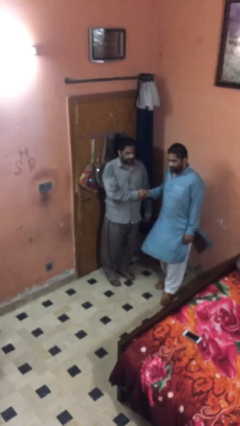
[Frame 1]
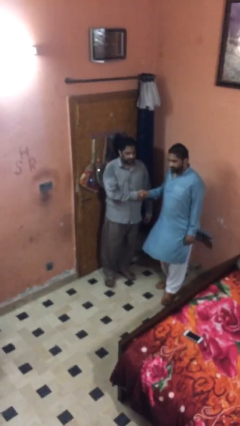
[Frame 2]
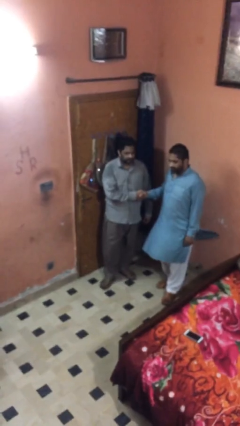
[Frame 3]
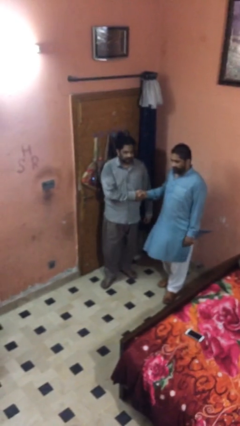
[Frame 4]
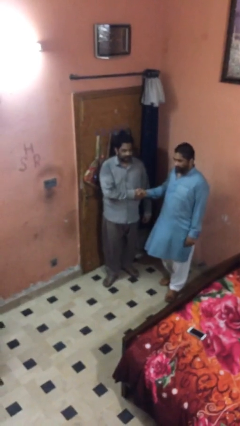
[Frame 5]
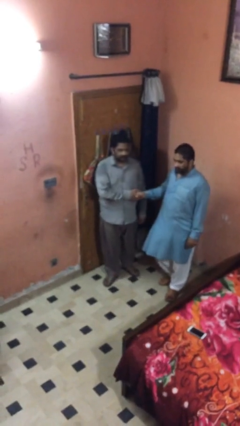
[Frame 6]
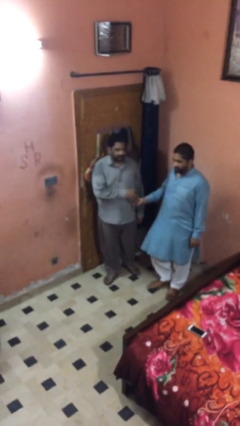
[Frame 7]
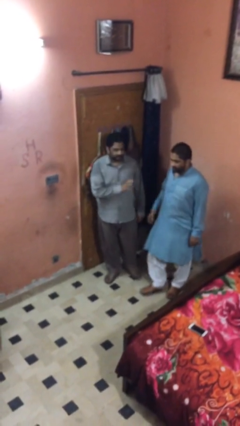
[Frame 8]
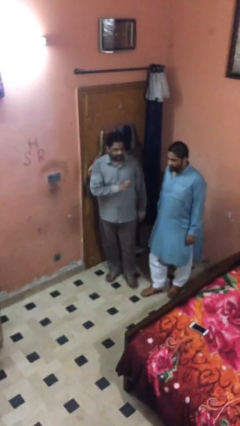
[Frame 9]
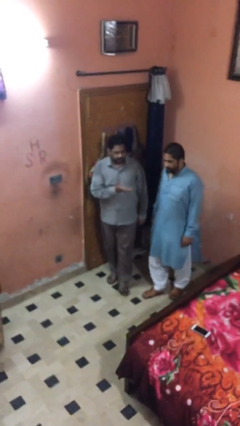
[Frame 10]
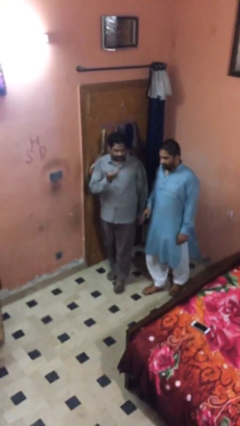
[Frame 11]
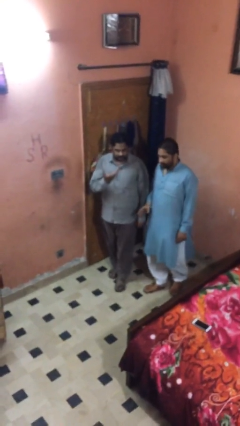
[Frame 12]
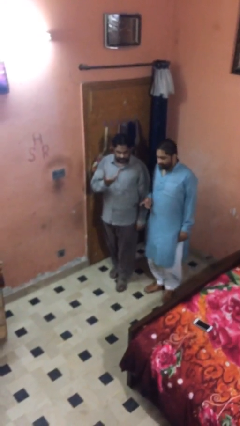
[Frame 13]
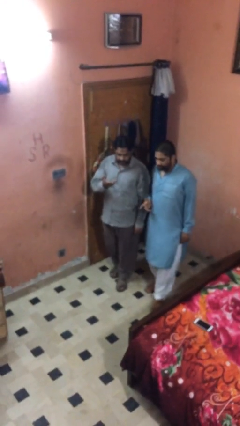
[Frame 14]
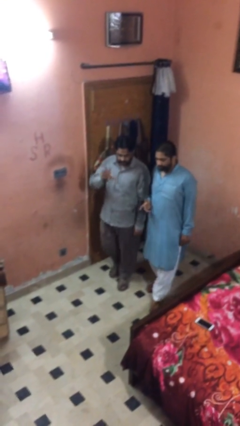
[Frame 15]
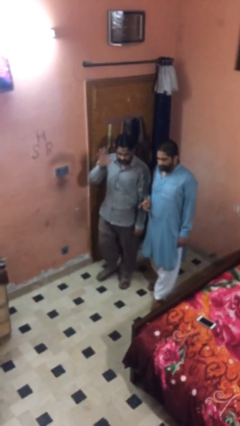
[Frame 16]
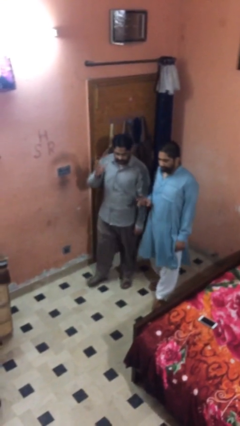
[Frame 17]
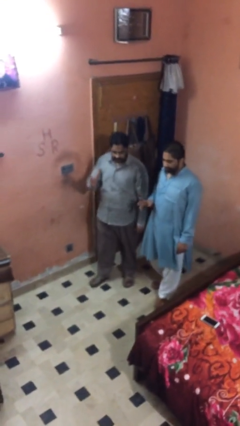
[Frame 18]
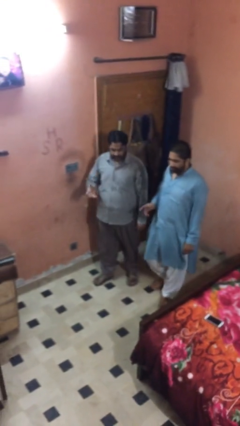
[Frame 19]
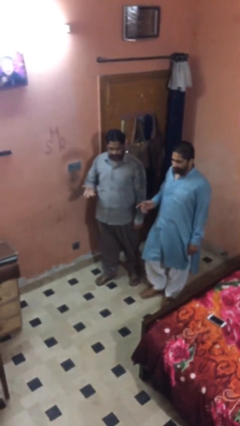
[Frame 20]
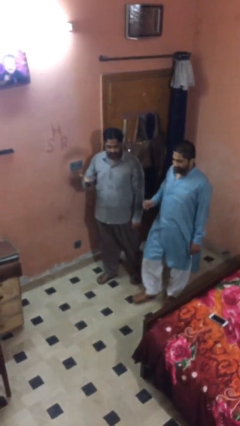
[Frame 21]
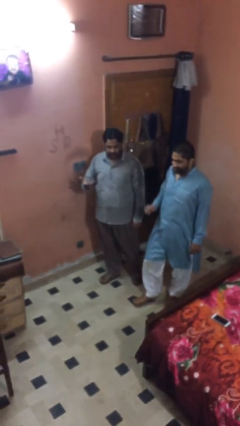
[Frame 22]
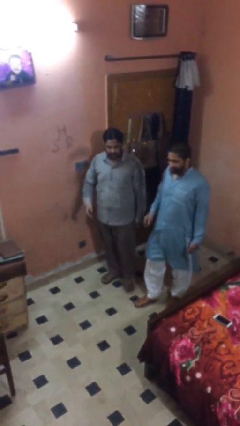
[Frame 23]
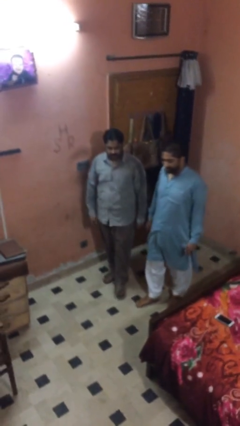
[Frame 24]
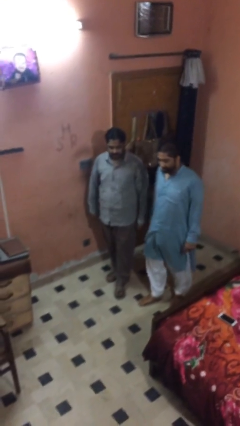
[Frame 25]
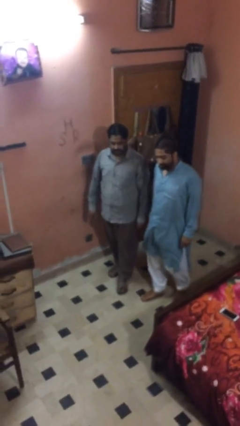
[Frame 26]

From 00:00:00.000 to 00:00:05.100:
person talks to person

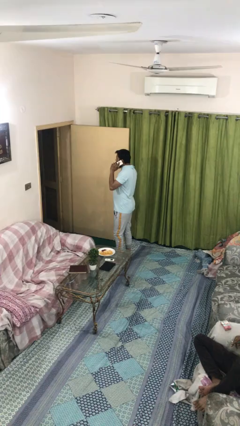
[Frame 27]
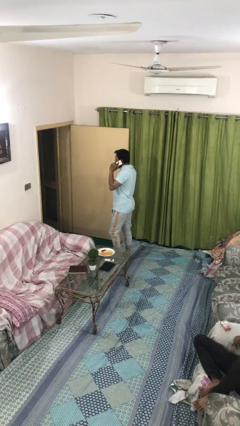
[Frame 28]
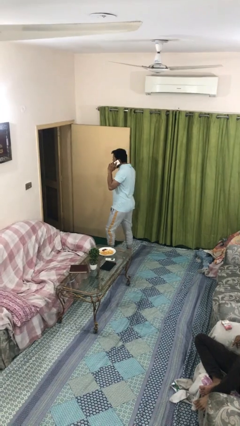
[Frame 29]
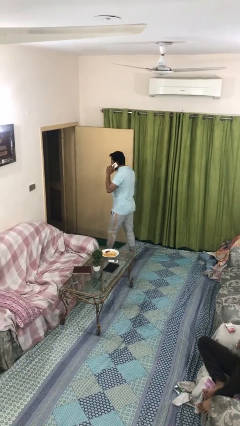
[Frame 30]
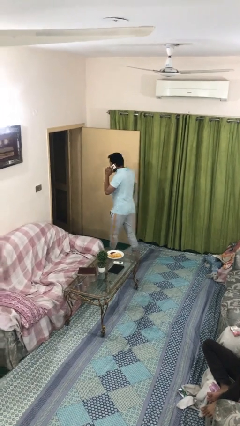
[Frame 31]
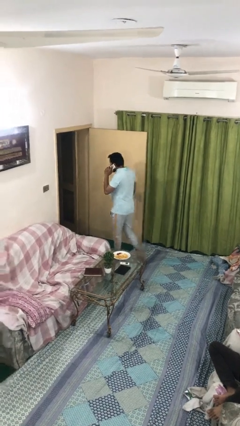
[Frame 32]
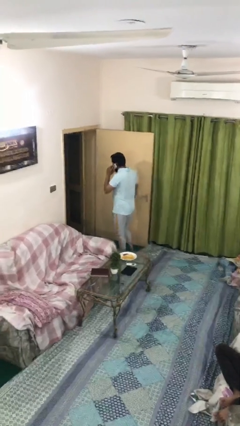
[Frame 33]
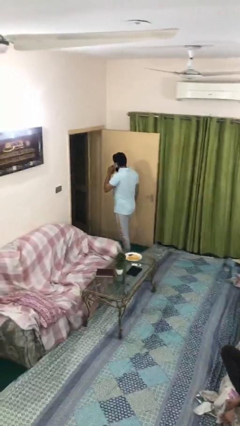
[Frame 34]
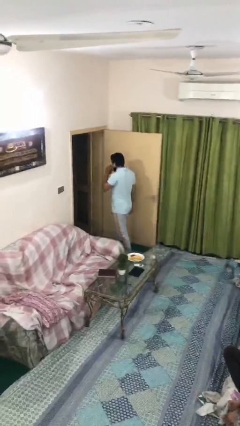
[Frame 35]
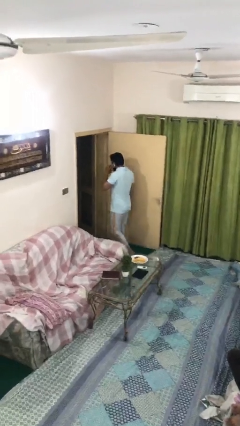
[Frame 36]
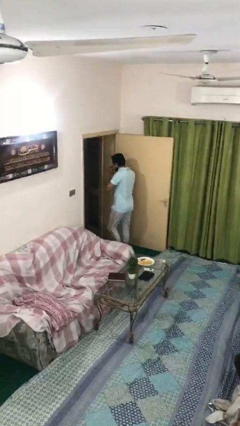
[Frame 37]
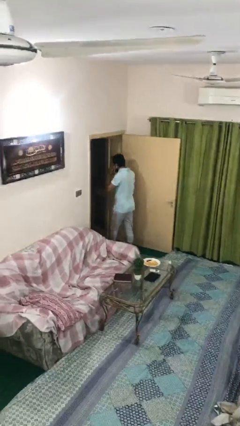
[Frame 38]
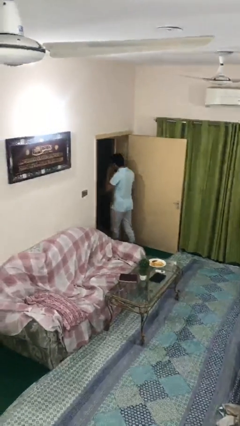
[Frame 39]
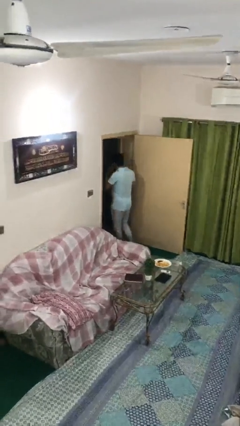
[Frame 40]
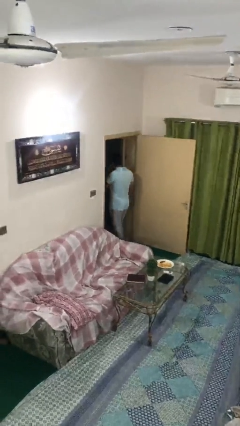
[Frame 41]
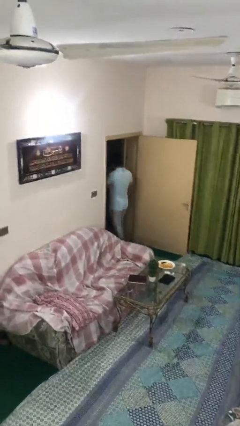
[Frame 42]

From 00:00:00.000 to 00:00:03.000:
person exits scene through structure

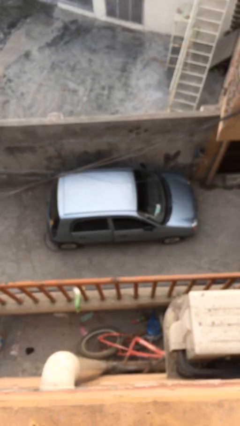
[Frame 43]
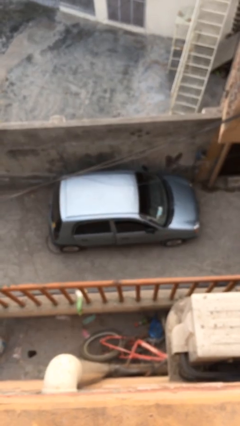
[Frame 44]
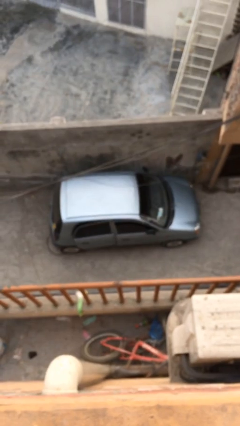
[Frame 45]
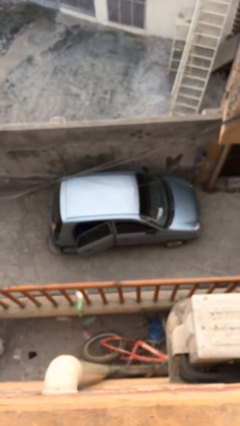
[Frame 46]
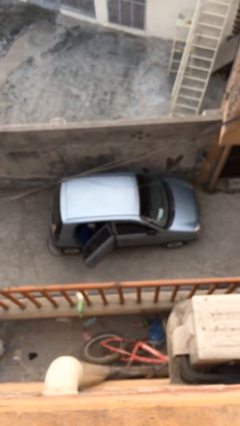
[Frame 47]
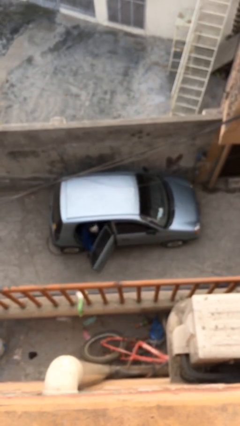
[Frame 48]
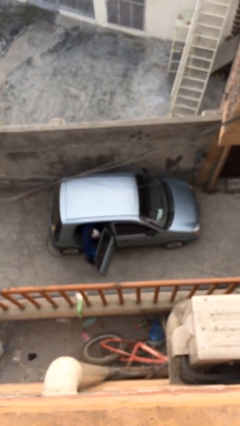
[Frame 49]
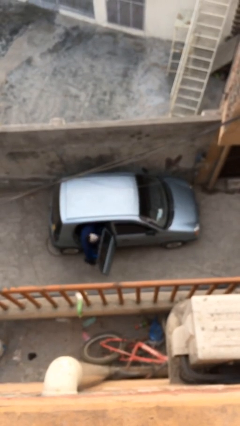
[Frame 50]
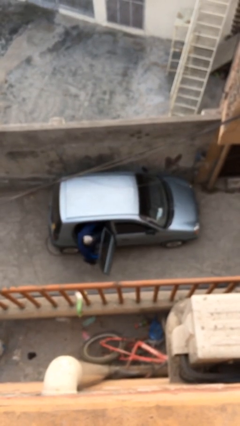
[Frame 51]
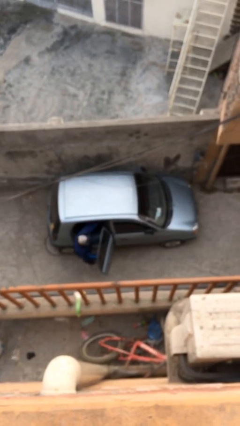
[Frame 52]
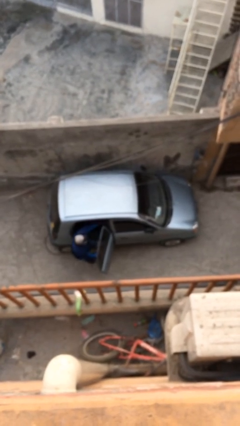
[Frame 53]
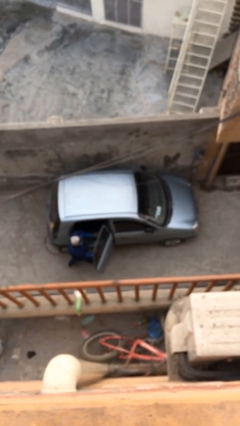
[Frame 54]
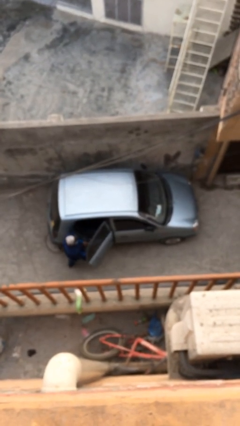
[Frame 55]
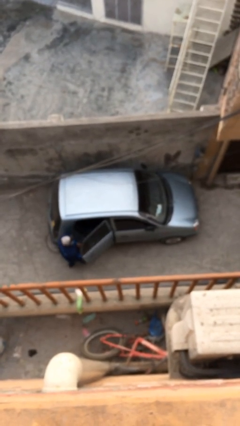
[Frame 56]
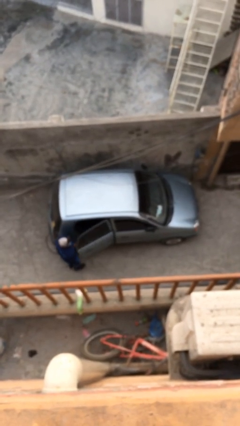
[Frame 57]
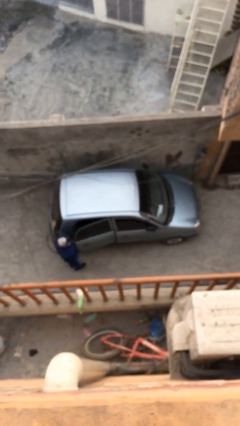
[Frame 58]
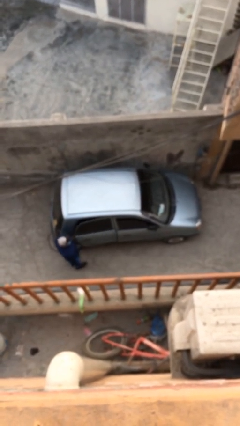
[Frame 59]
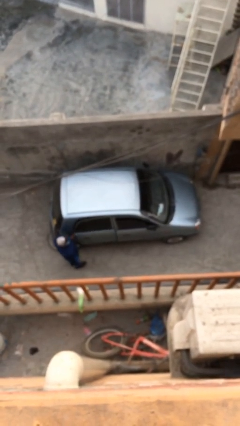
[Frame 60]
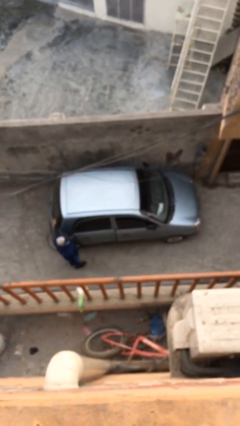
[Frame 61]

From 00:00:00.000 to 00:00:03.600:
car drops off person

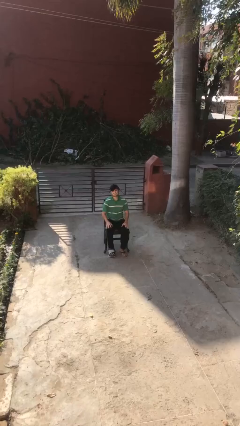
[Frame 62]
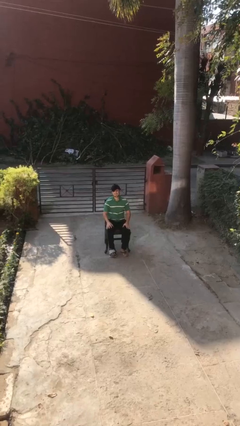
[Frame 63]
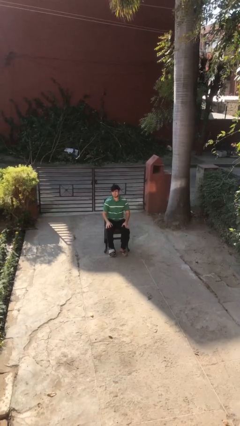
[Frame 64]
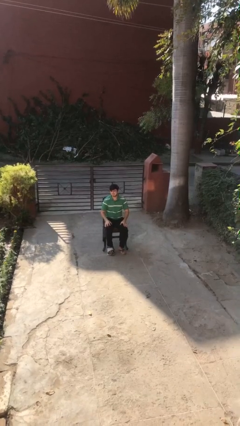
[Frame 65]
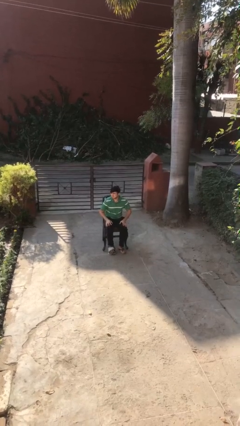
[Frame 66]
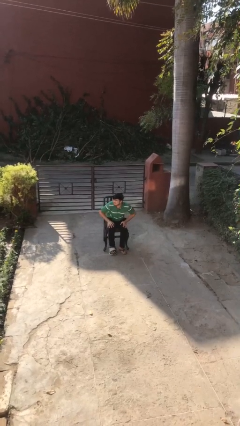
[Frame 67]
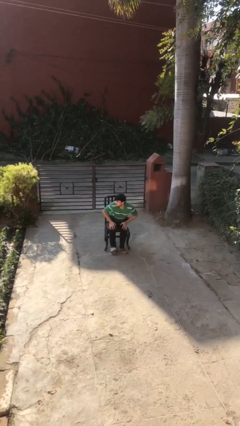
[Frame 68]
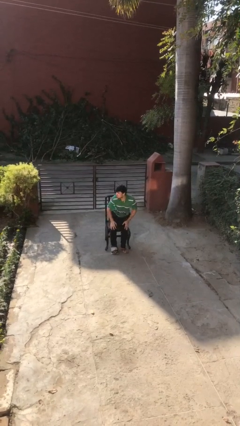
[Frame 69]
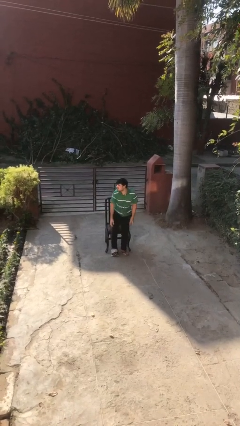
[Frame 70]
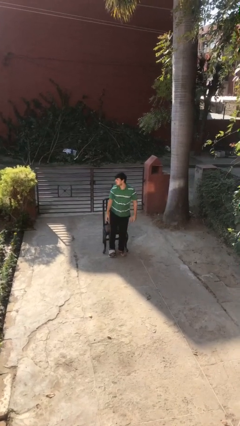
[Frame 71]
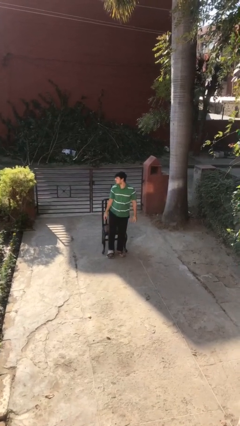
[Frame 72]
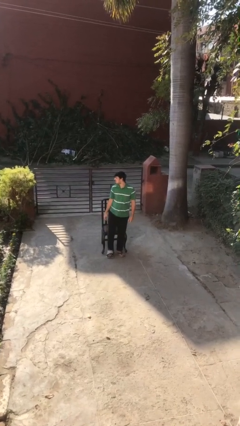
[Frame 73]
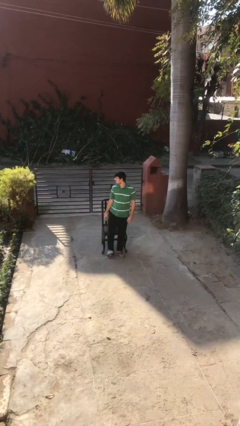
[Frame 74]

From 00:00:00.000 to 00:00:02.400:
person stands up

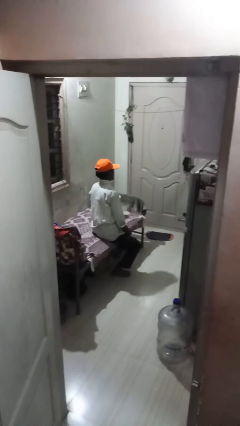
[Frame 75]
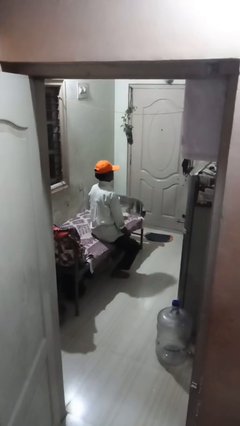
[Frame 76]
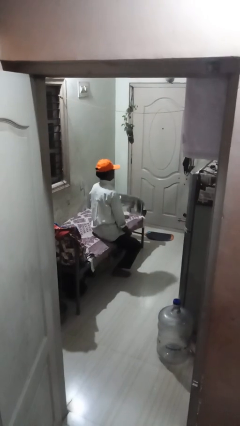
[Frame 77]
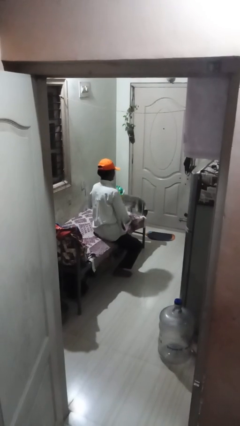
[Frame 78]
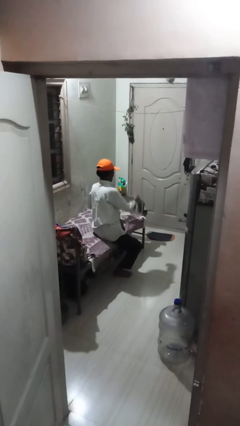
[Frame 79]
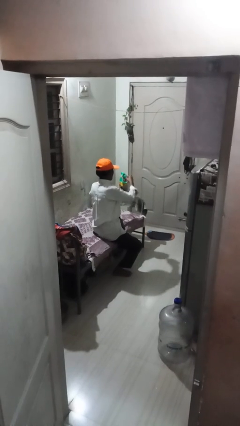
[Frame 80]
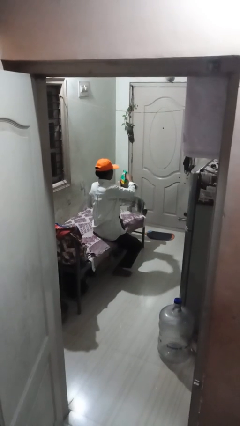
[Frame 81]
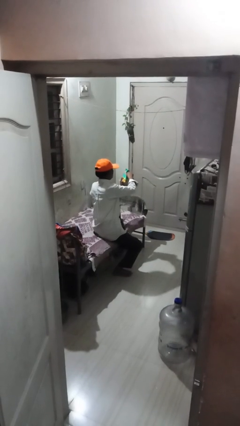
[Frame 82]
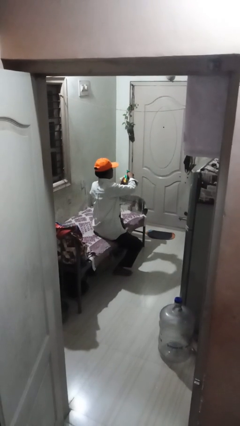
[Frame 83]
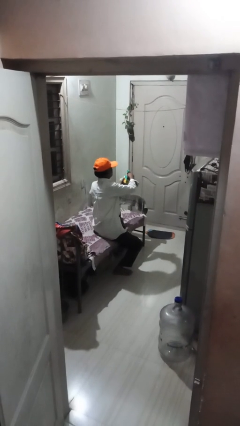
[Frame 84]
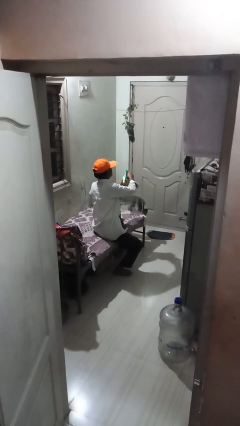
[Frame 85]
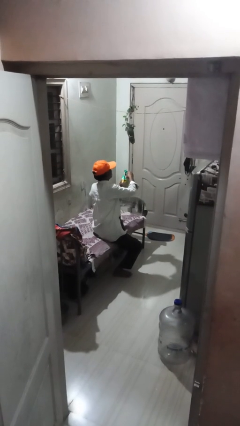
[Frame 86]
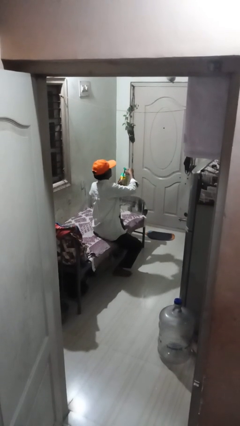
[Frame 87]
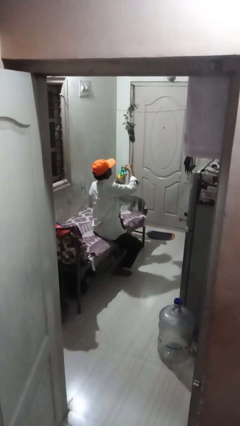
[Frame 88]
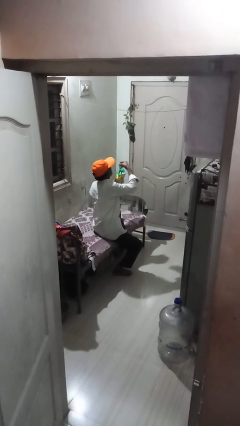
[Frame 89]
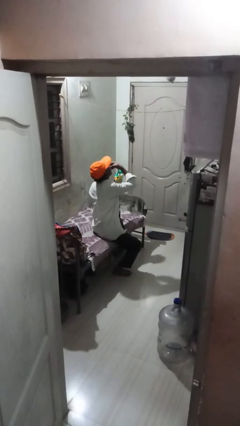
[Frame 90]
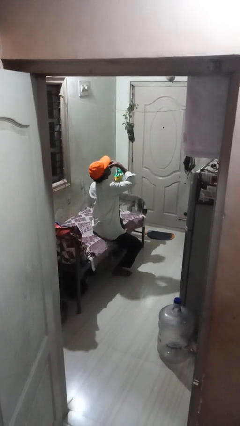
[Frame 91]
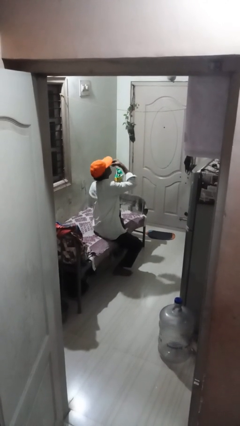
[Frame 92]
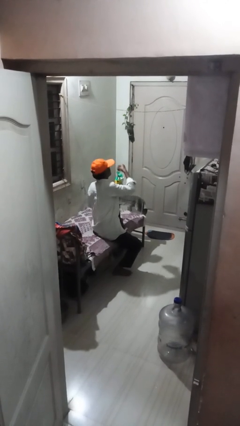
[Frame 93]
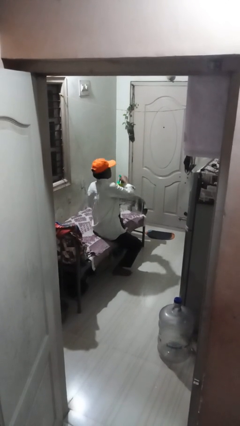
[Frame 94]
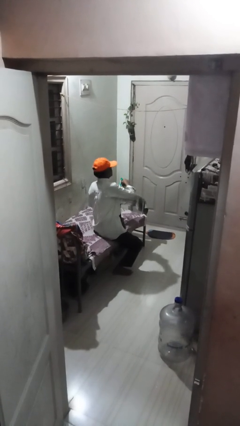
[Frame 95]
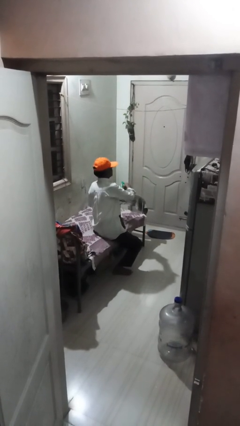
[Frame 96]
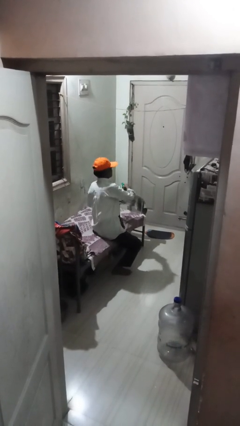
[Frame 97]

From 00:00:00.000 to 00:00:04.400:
person eats snack from bag
